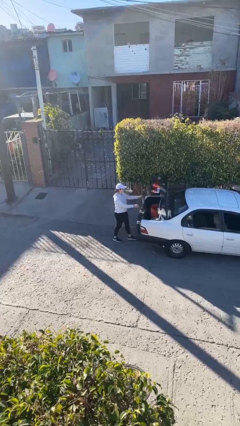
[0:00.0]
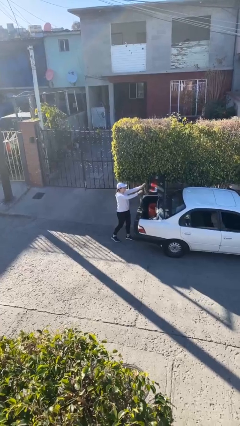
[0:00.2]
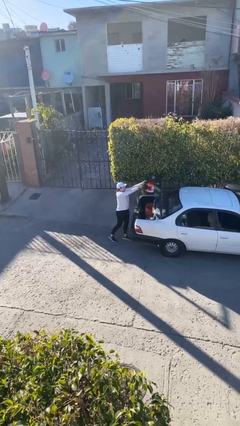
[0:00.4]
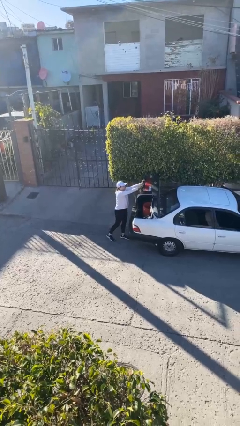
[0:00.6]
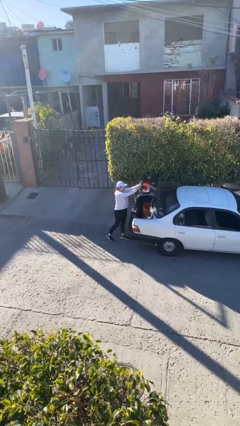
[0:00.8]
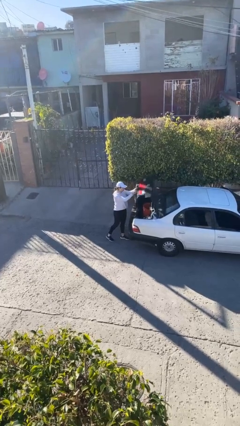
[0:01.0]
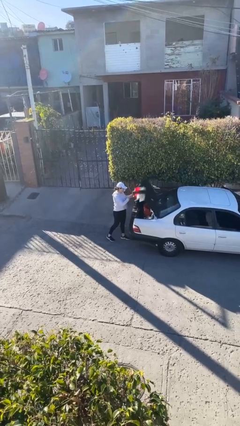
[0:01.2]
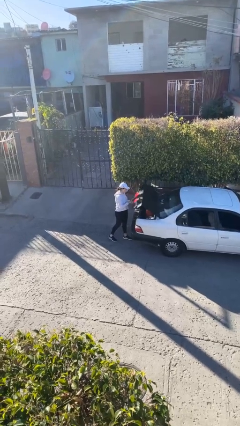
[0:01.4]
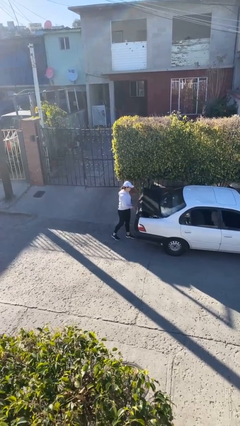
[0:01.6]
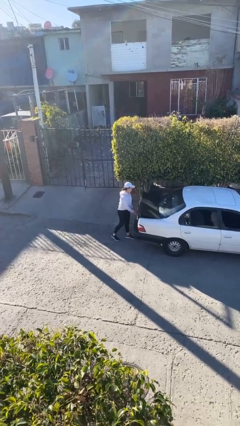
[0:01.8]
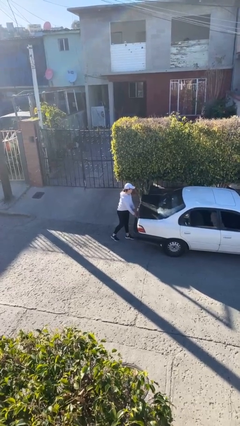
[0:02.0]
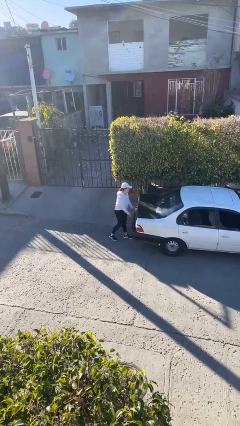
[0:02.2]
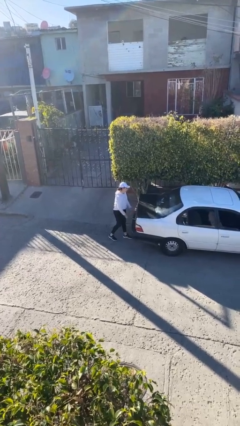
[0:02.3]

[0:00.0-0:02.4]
person closes car trunk

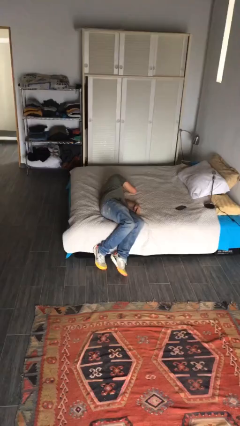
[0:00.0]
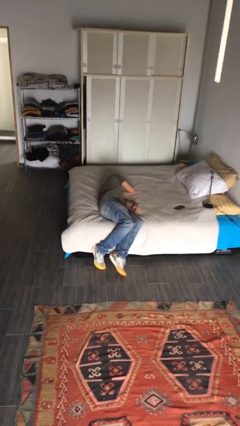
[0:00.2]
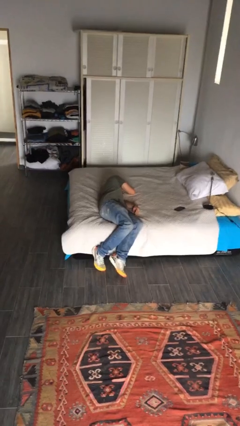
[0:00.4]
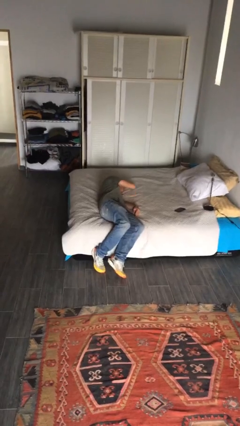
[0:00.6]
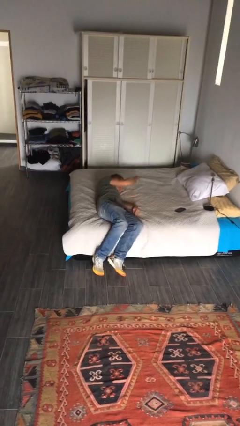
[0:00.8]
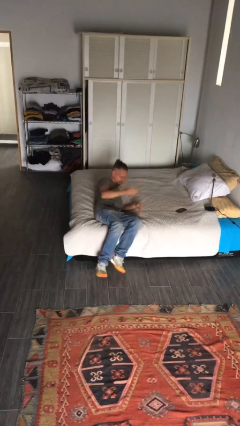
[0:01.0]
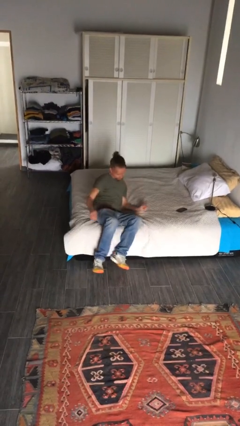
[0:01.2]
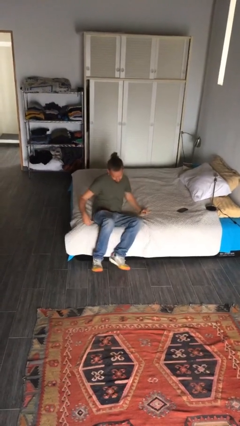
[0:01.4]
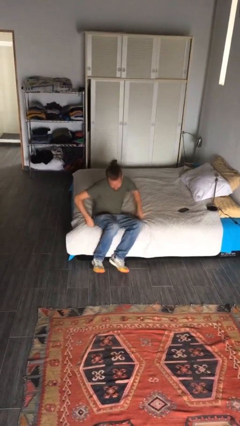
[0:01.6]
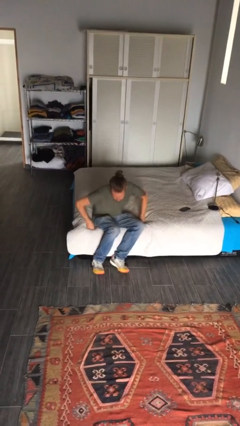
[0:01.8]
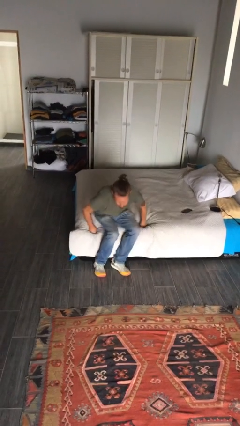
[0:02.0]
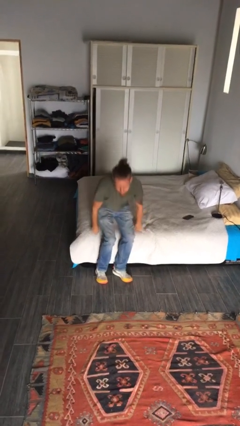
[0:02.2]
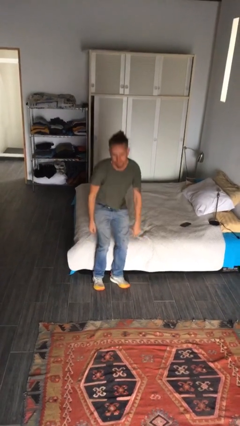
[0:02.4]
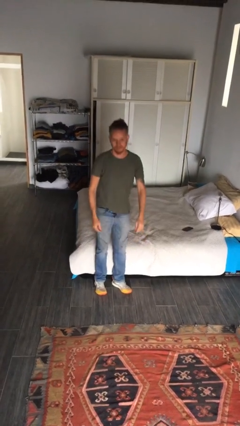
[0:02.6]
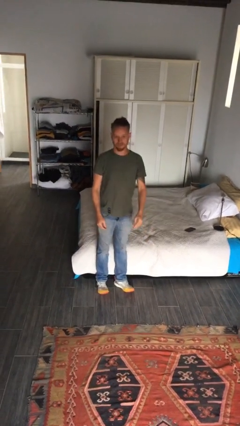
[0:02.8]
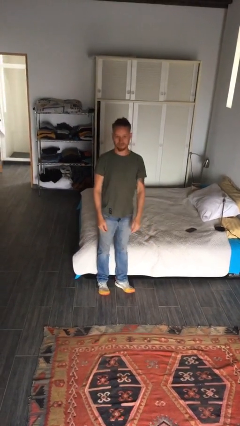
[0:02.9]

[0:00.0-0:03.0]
person stands up

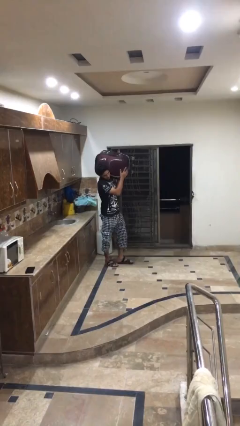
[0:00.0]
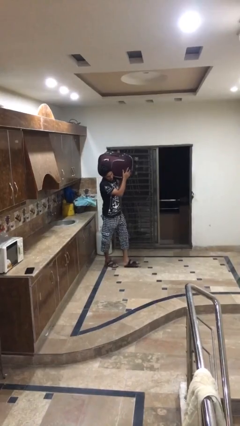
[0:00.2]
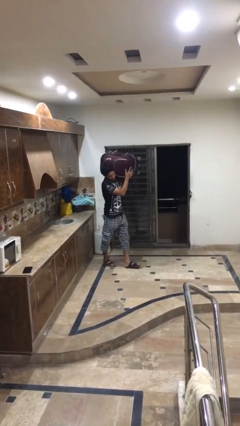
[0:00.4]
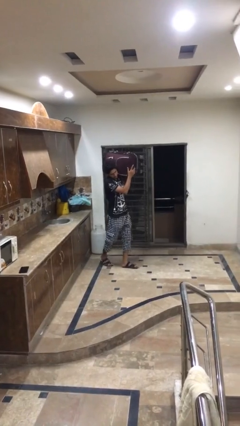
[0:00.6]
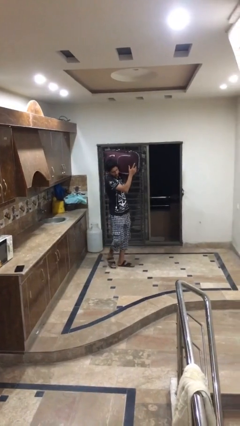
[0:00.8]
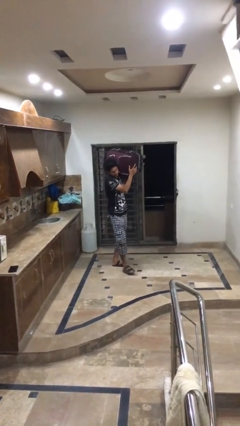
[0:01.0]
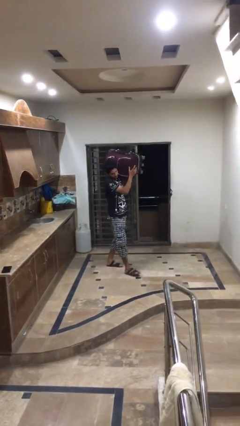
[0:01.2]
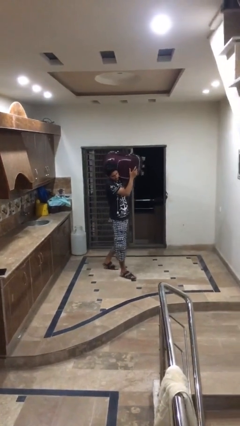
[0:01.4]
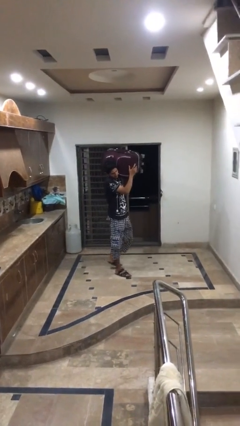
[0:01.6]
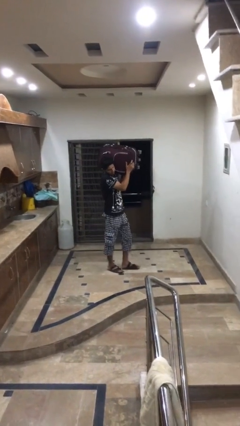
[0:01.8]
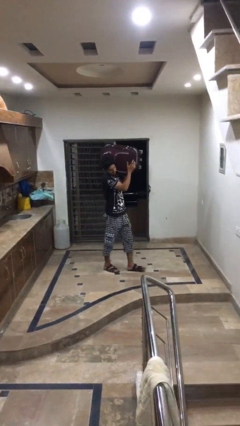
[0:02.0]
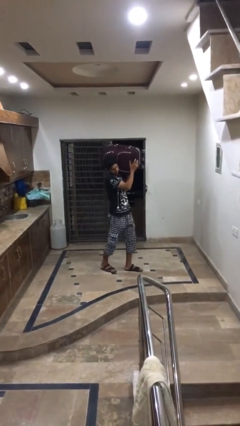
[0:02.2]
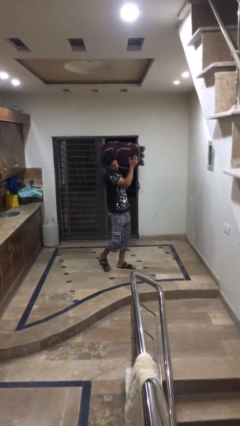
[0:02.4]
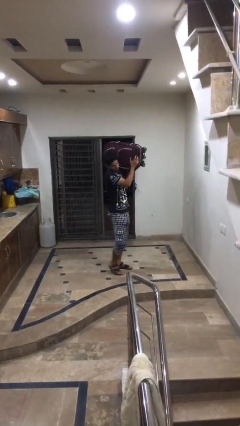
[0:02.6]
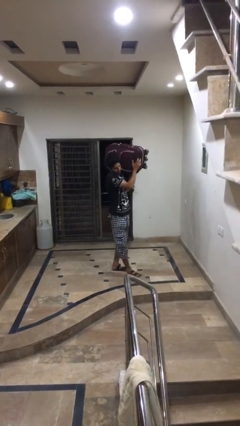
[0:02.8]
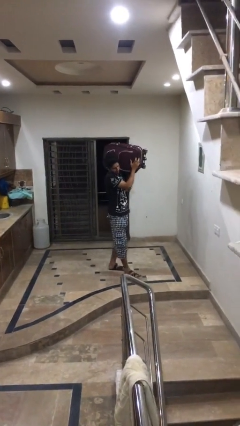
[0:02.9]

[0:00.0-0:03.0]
person carries heavy object

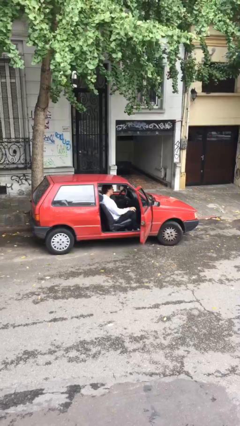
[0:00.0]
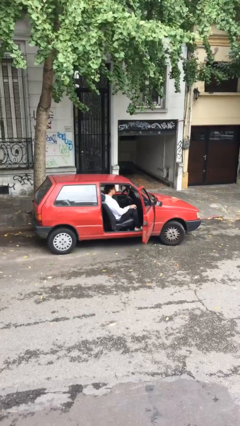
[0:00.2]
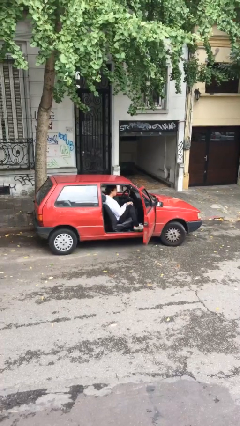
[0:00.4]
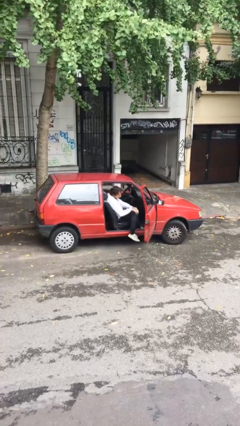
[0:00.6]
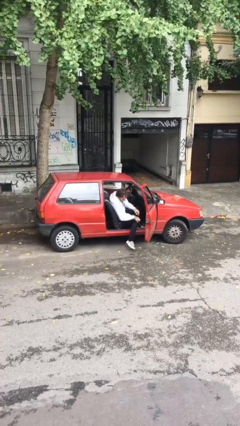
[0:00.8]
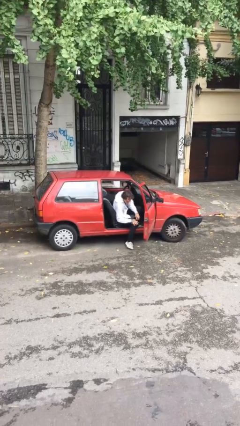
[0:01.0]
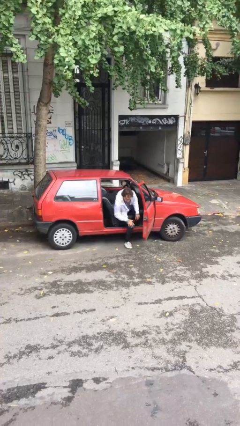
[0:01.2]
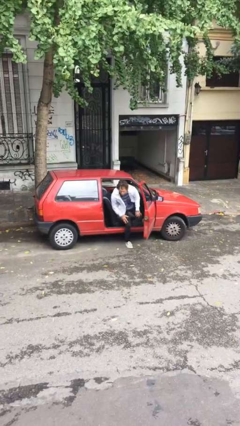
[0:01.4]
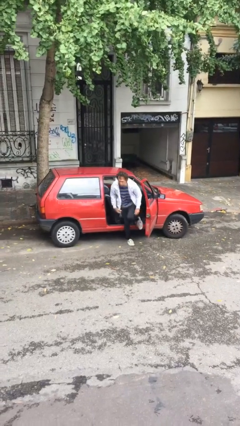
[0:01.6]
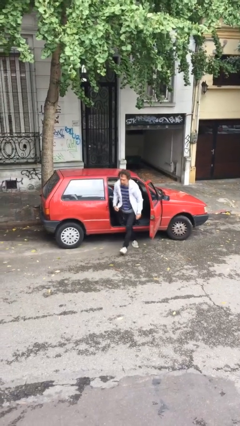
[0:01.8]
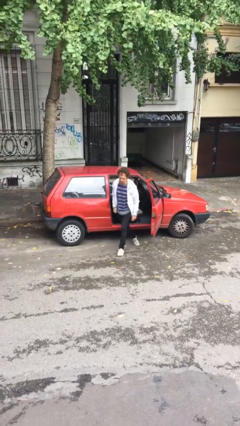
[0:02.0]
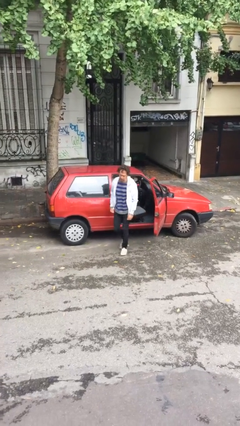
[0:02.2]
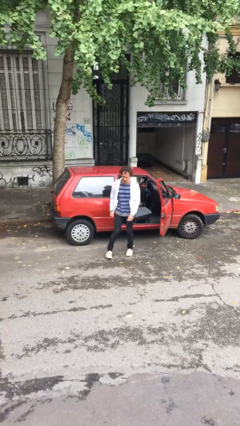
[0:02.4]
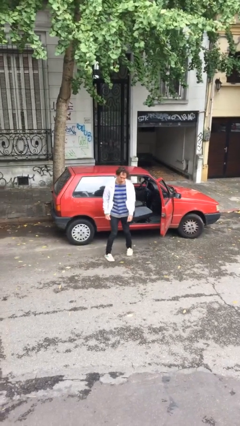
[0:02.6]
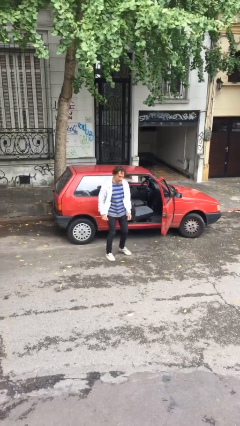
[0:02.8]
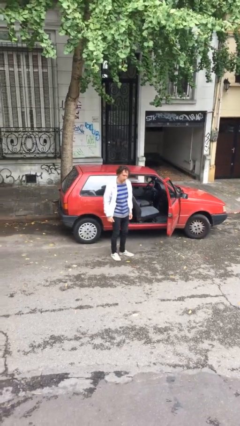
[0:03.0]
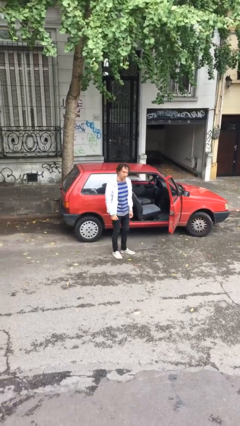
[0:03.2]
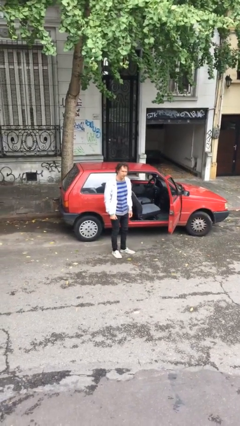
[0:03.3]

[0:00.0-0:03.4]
person exits car

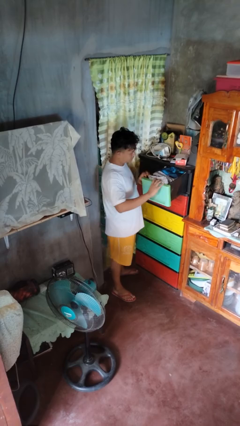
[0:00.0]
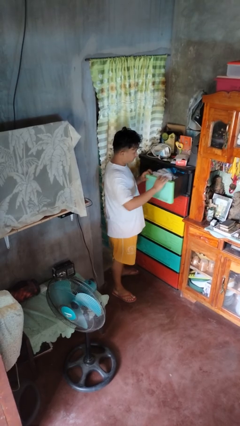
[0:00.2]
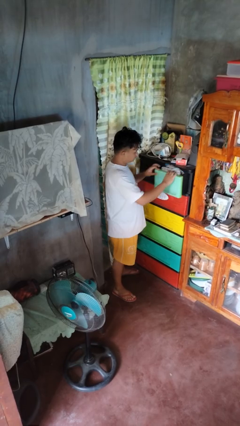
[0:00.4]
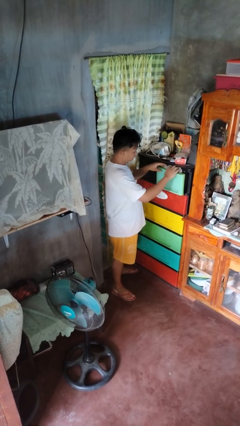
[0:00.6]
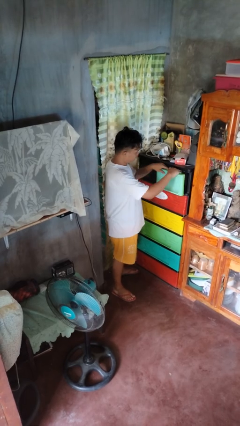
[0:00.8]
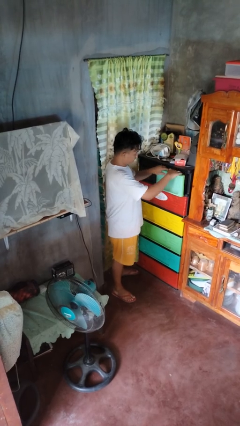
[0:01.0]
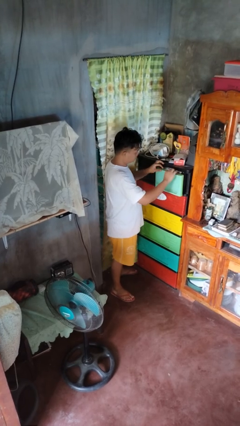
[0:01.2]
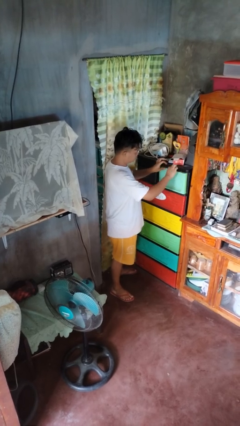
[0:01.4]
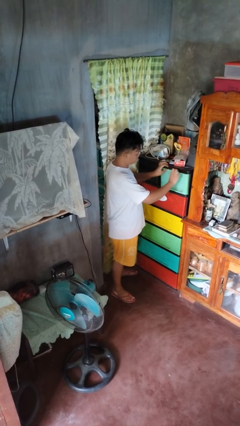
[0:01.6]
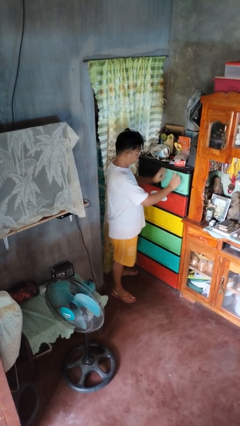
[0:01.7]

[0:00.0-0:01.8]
person closes dresser drawer

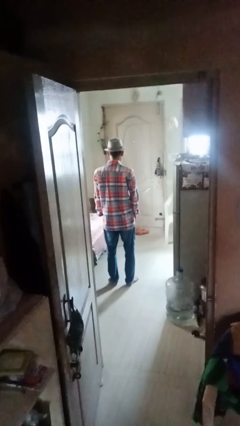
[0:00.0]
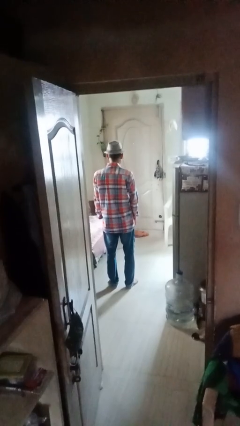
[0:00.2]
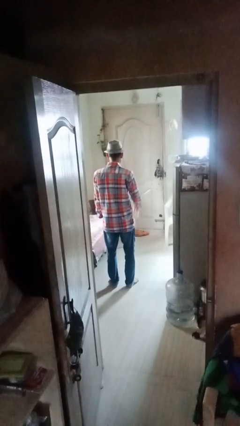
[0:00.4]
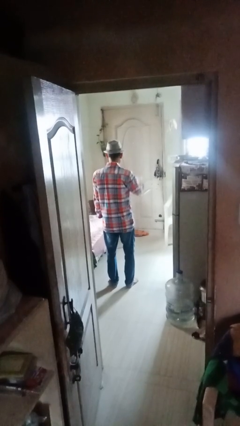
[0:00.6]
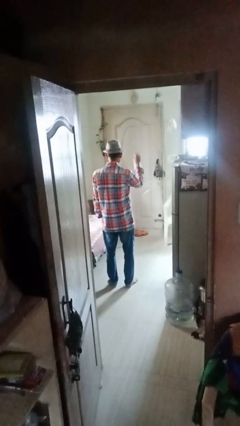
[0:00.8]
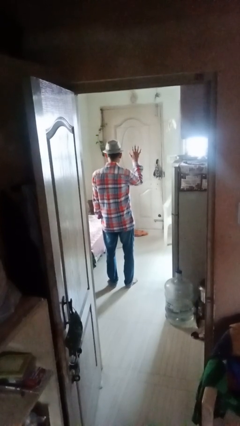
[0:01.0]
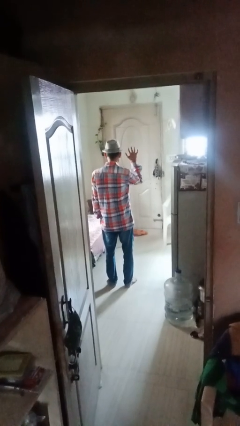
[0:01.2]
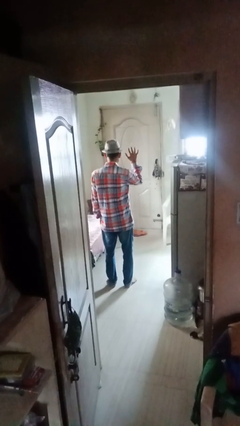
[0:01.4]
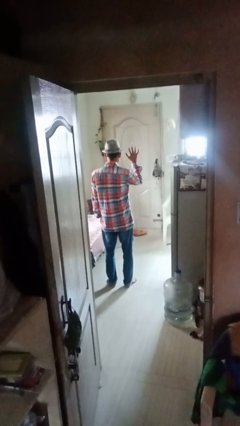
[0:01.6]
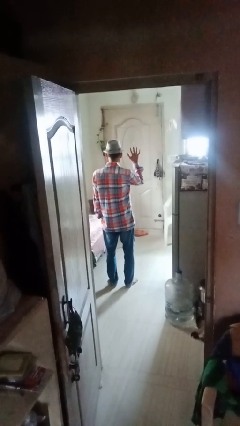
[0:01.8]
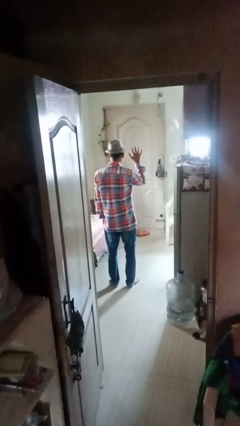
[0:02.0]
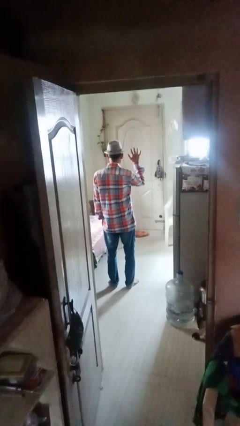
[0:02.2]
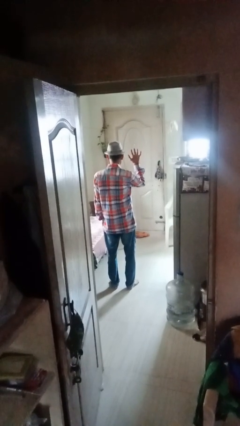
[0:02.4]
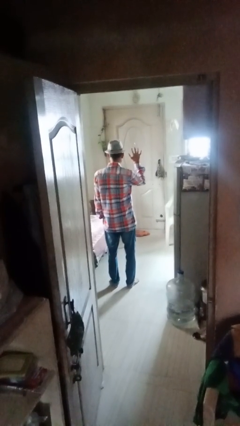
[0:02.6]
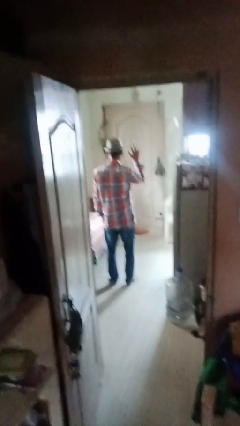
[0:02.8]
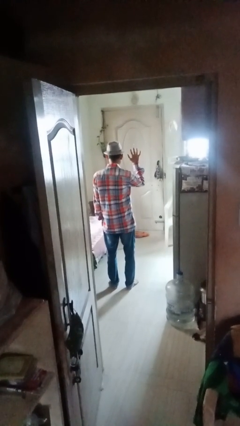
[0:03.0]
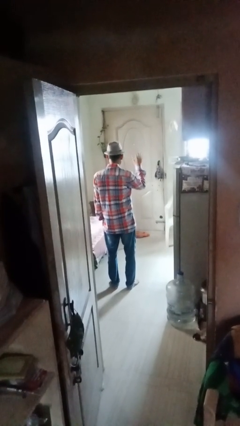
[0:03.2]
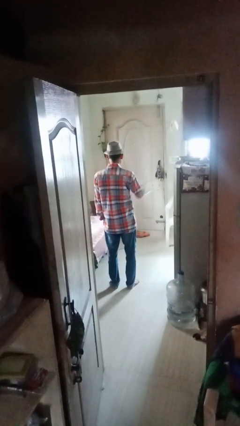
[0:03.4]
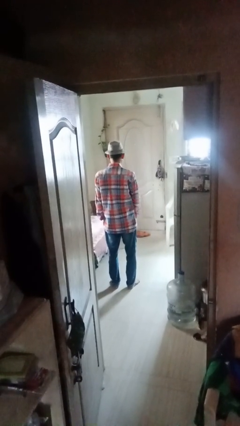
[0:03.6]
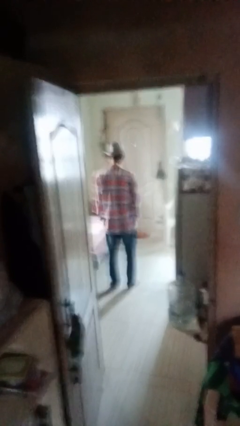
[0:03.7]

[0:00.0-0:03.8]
person gestures number five
